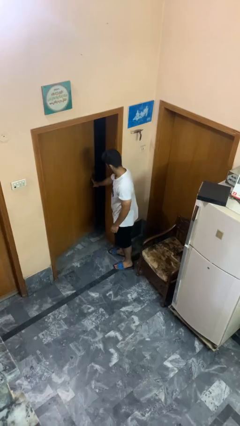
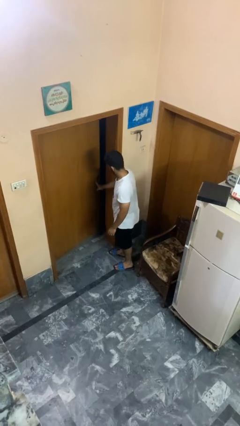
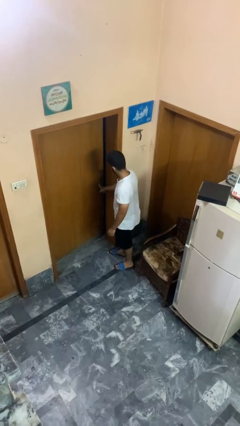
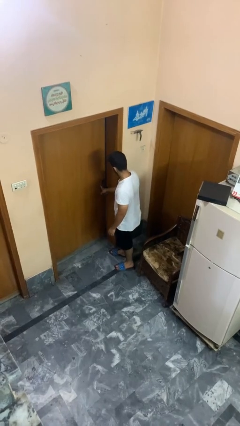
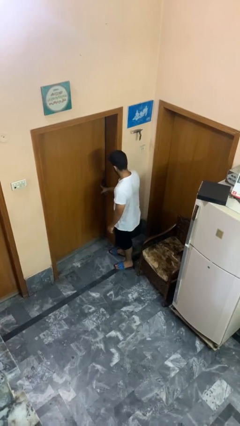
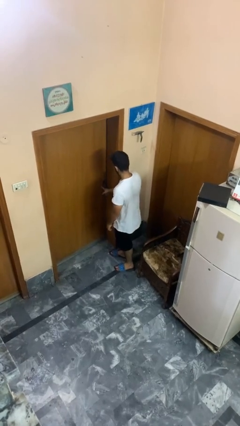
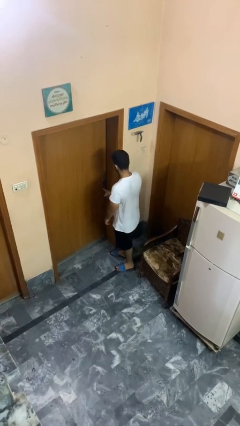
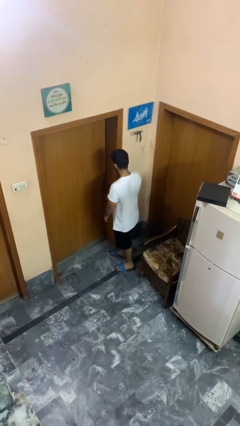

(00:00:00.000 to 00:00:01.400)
person closes facility door

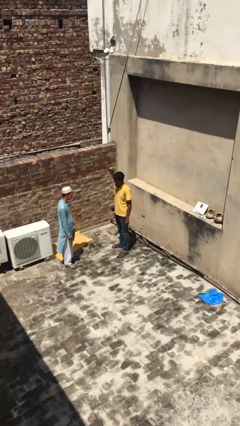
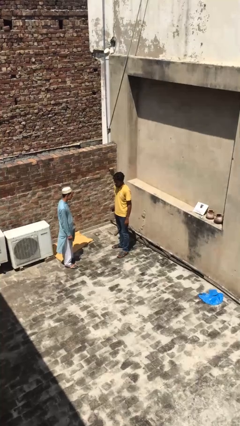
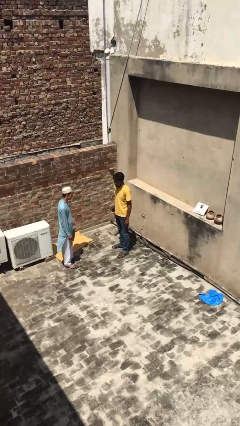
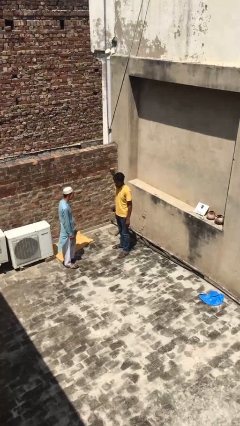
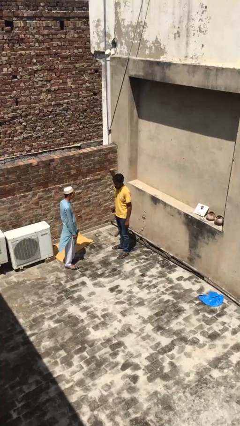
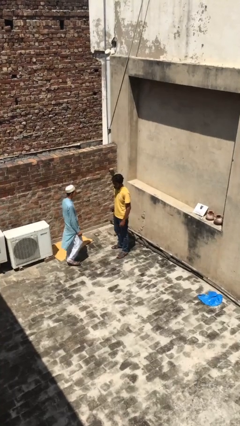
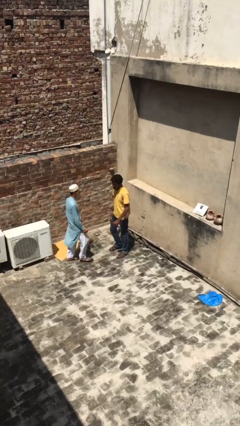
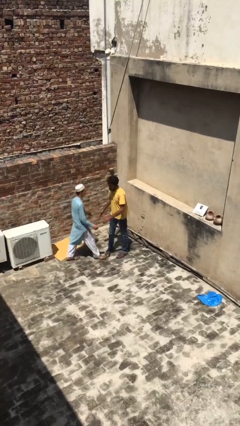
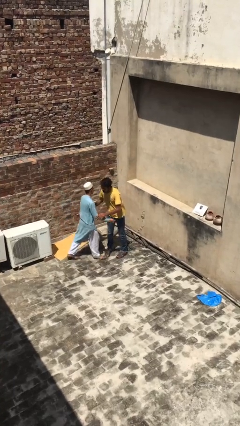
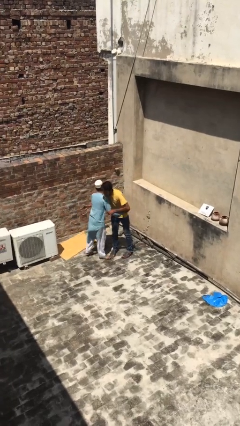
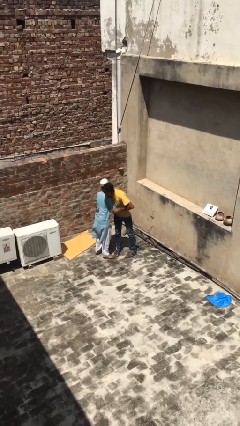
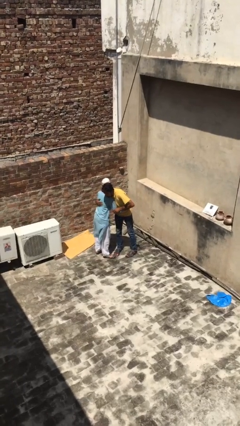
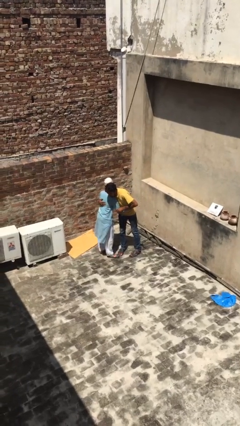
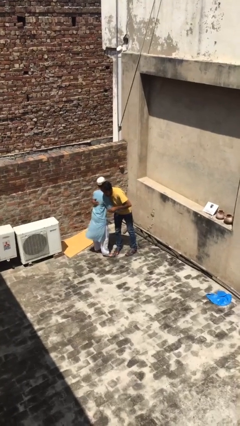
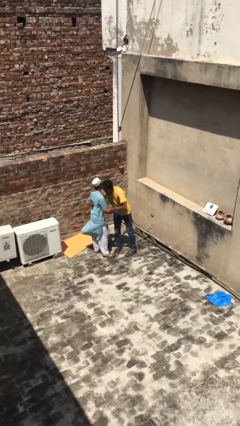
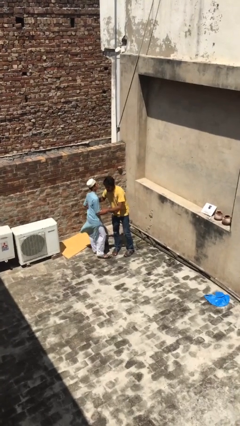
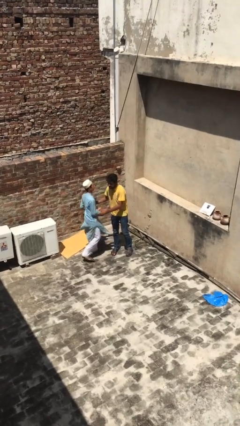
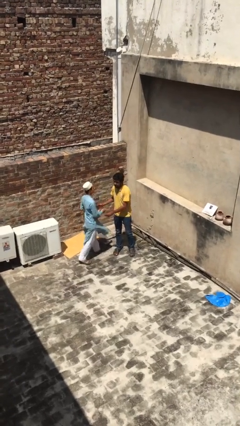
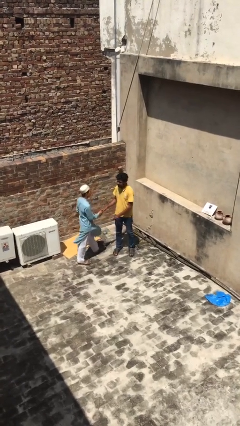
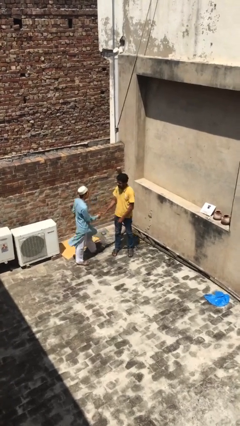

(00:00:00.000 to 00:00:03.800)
person embraces person

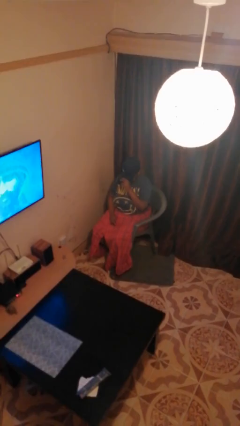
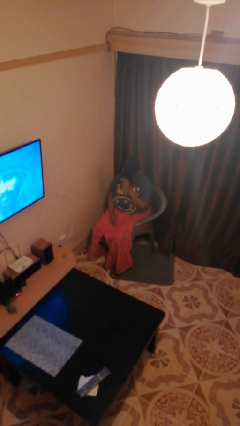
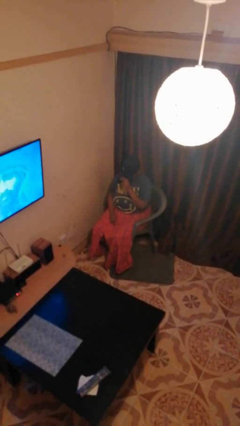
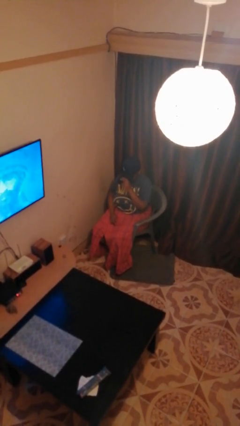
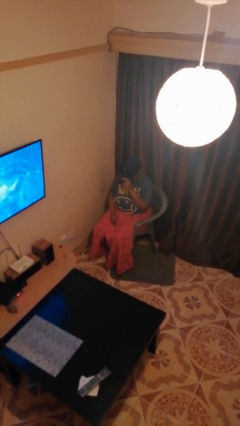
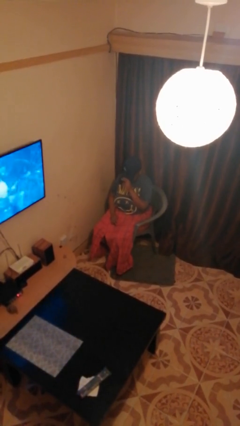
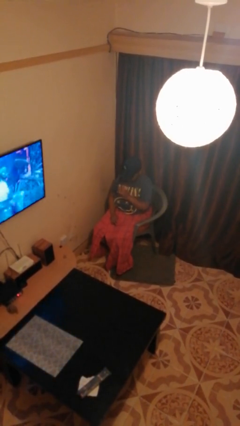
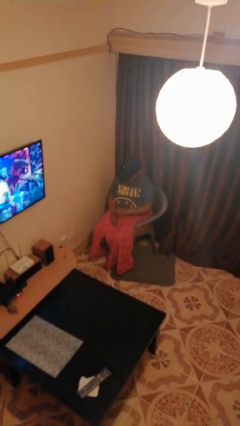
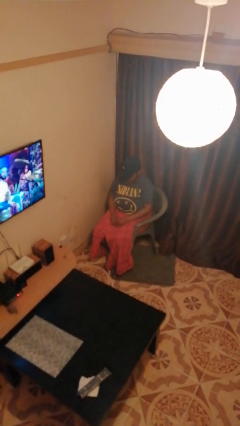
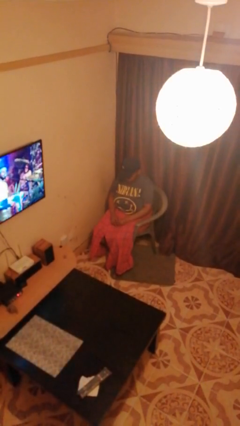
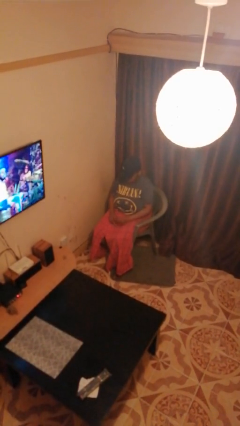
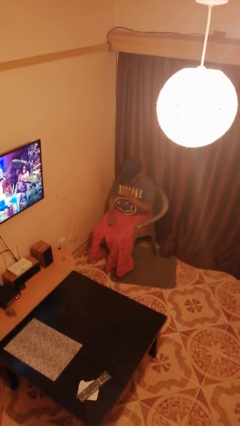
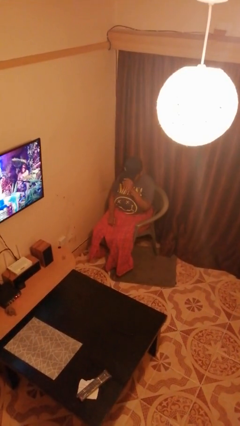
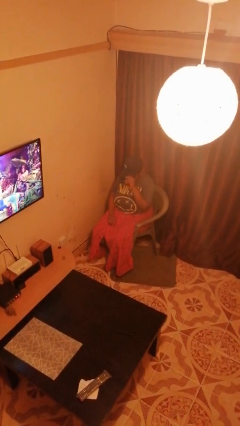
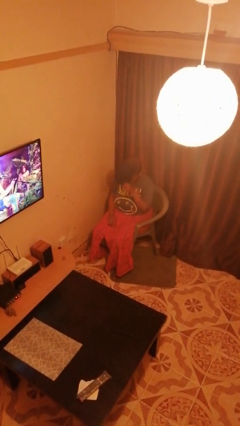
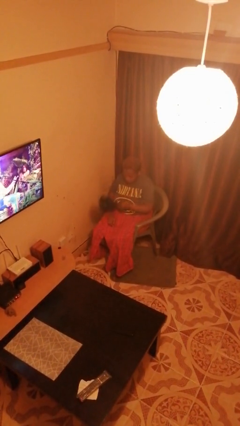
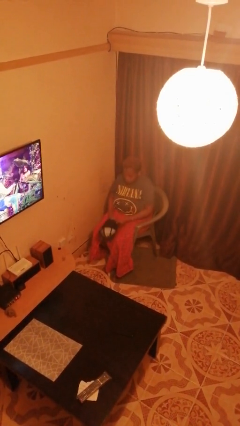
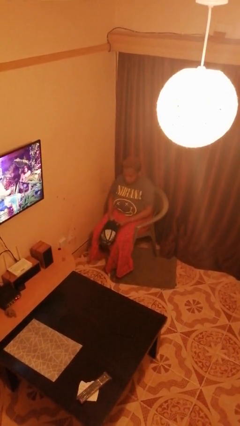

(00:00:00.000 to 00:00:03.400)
person takes off hat

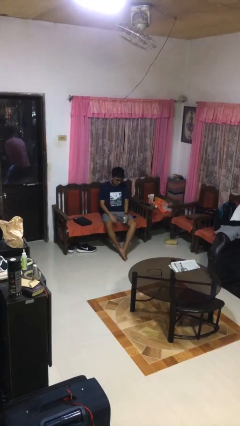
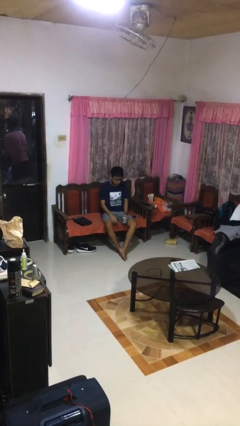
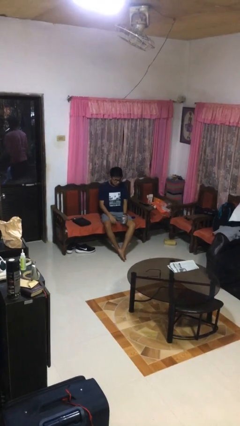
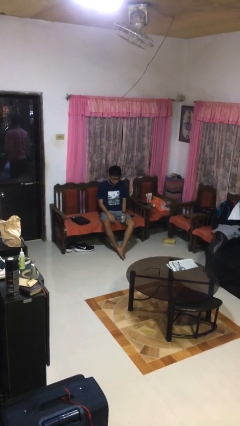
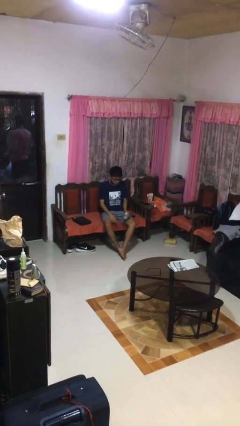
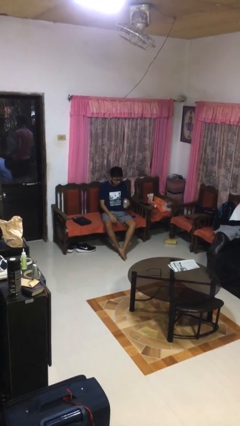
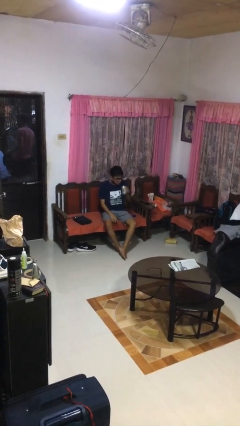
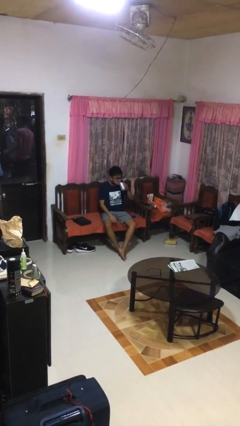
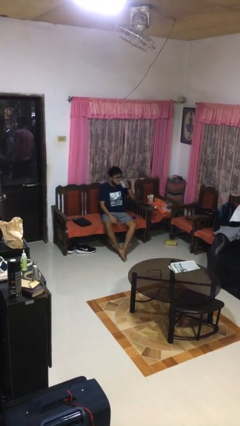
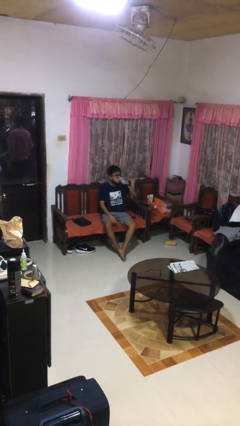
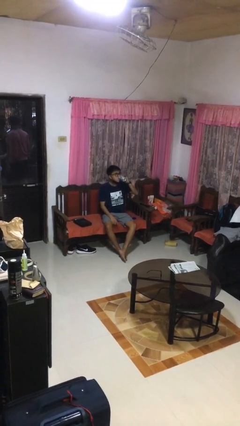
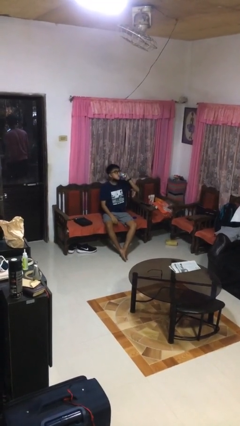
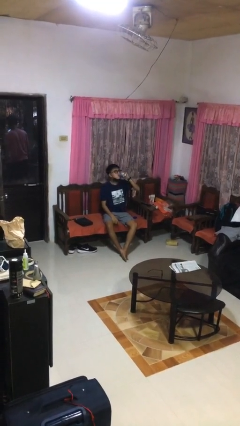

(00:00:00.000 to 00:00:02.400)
person drinks from beverage can

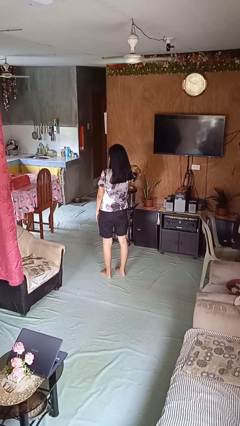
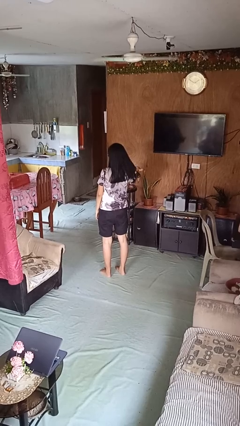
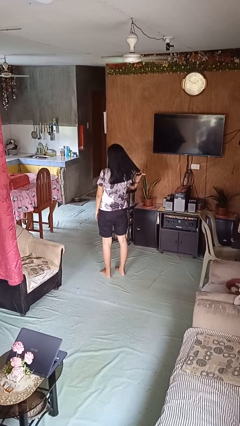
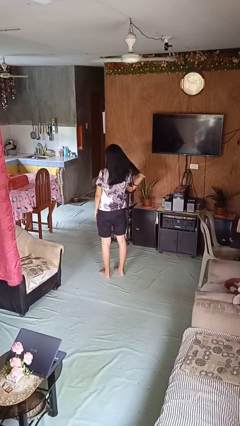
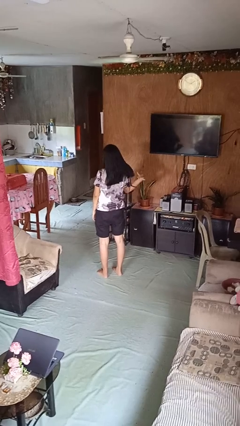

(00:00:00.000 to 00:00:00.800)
person strokes hair

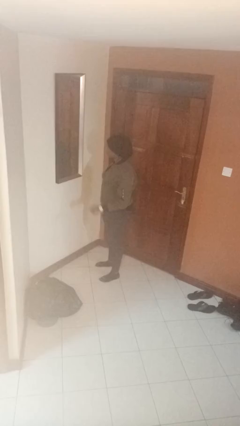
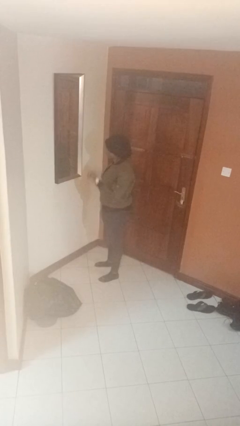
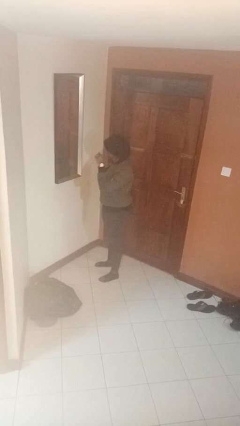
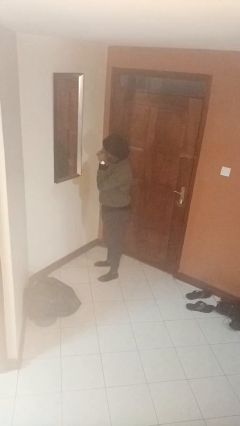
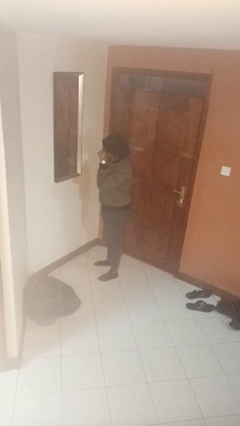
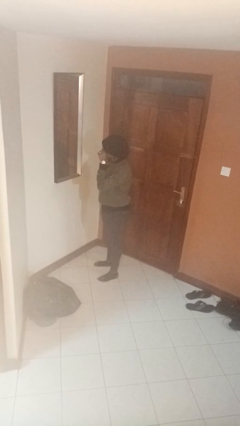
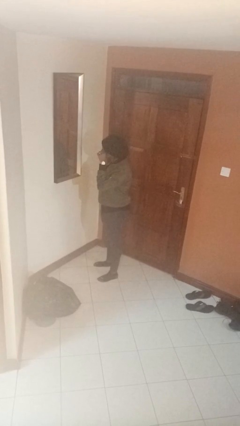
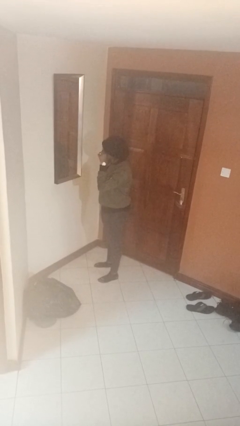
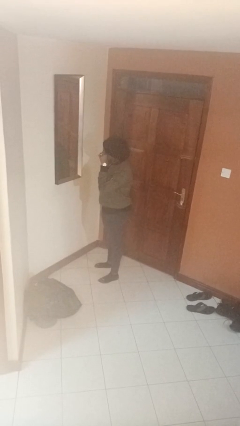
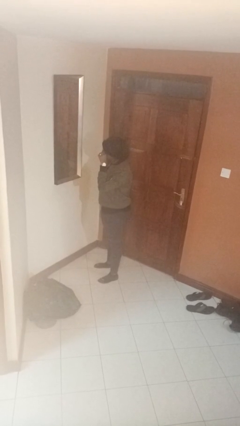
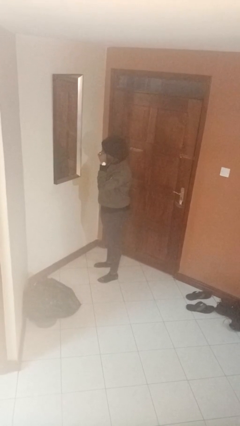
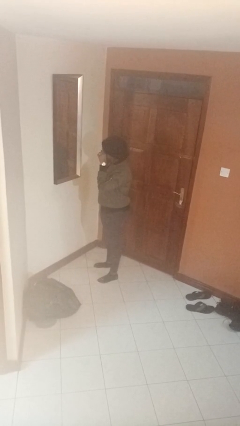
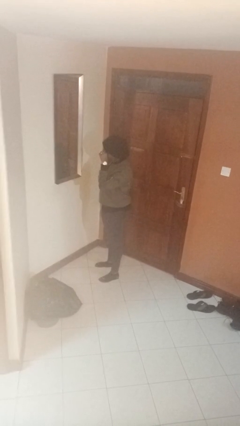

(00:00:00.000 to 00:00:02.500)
person applies eye makeup

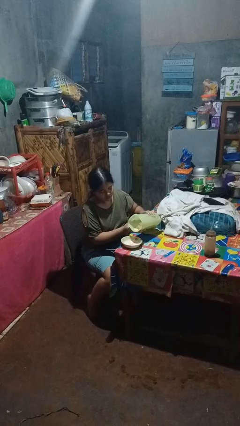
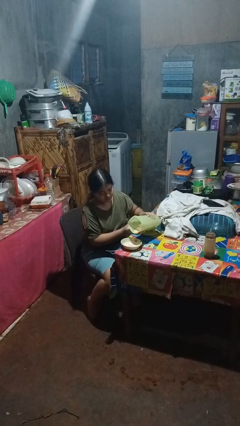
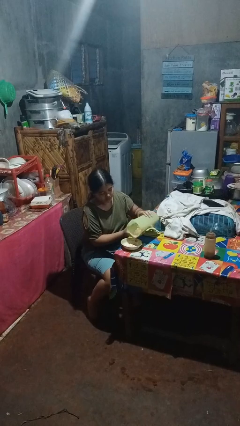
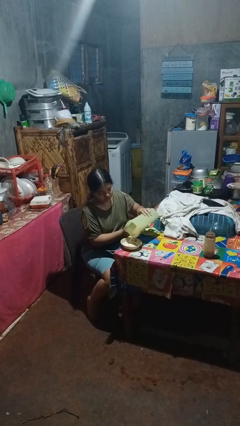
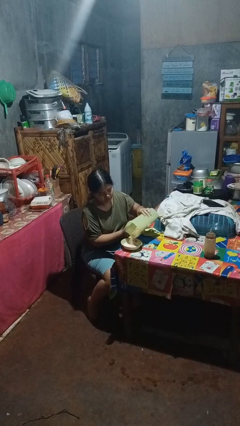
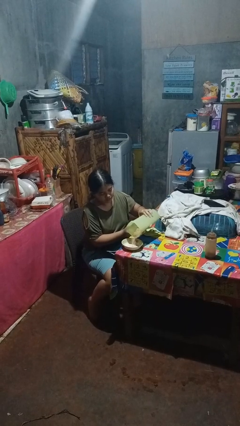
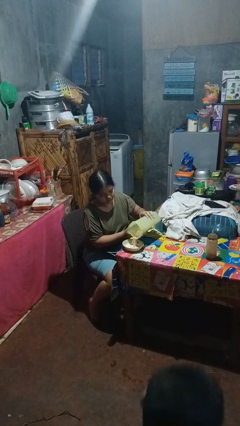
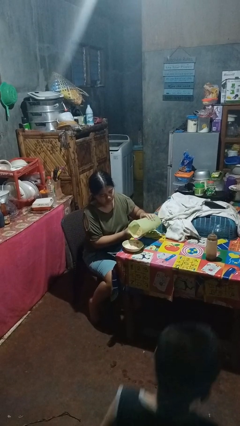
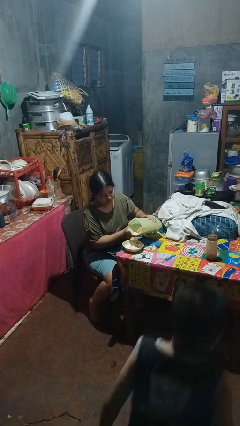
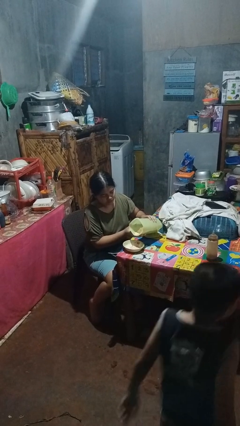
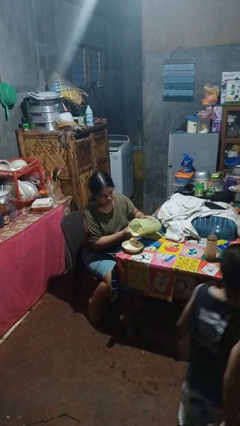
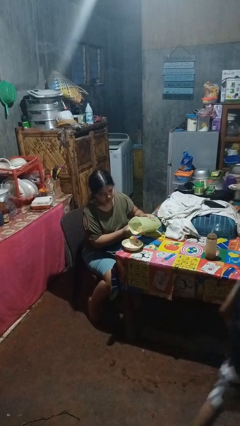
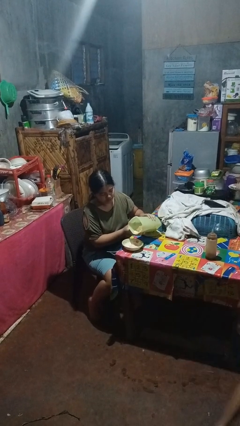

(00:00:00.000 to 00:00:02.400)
person pours into bowl

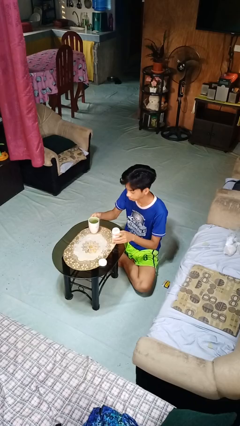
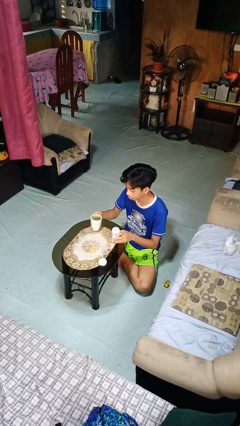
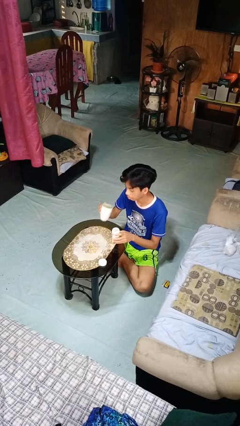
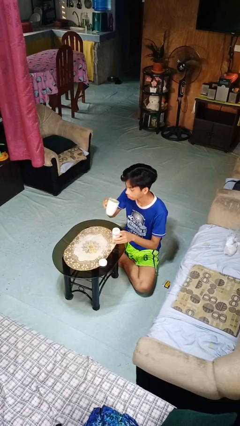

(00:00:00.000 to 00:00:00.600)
person drinks from cup
